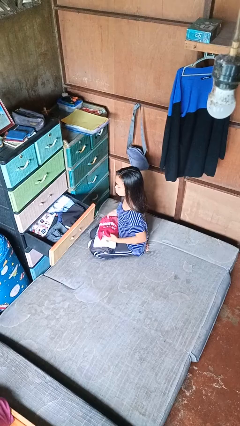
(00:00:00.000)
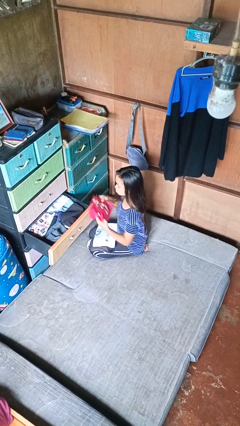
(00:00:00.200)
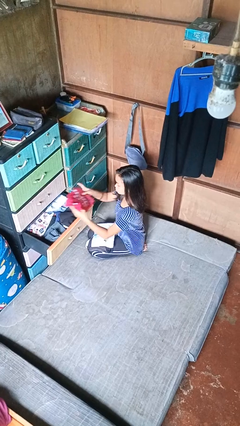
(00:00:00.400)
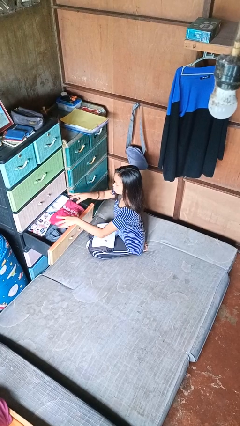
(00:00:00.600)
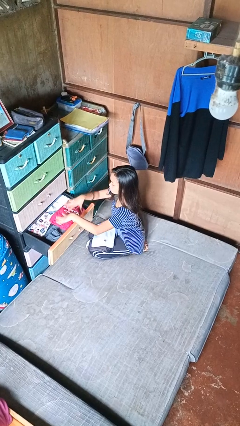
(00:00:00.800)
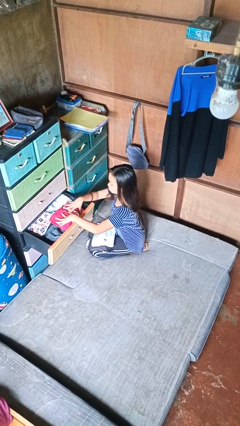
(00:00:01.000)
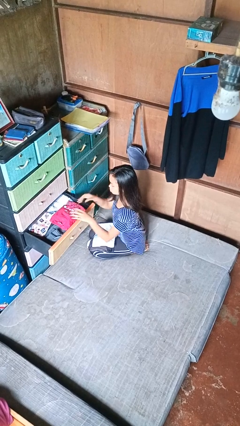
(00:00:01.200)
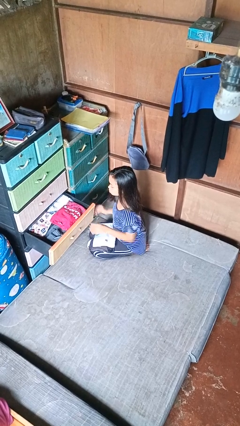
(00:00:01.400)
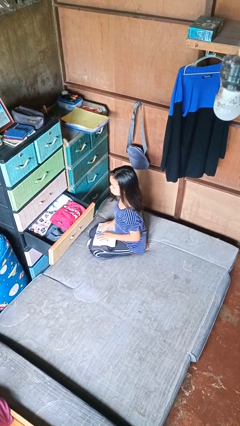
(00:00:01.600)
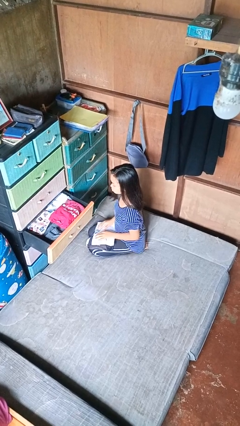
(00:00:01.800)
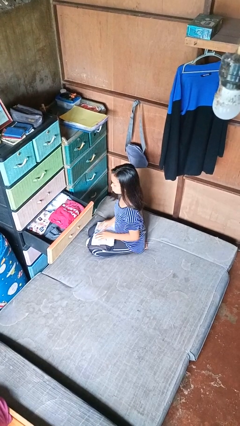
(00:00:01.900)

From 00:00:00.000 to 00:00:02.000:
person puts clothes into dresser

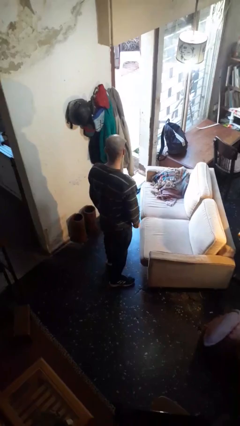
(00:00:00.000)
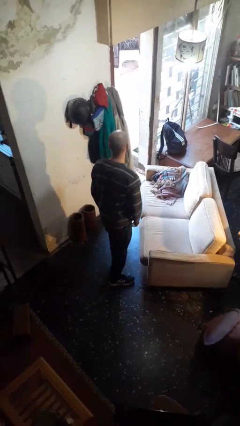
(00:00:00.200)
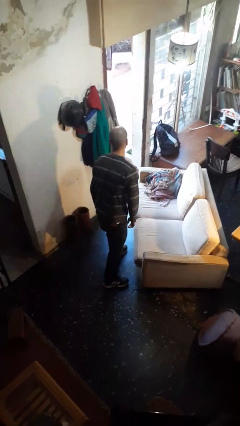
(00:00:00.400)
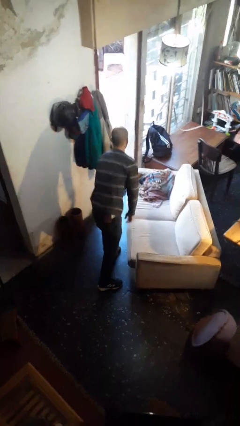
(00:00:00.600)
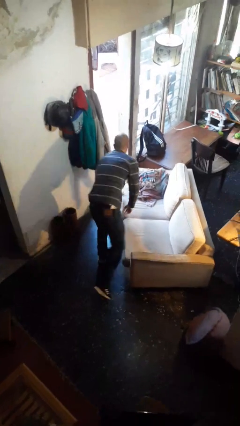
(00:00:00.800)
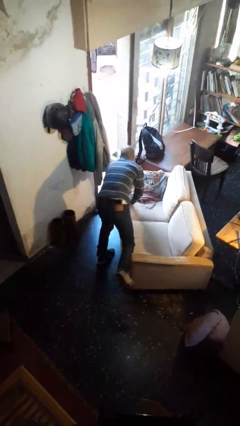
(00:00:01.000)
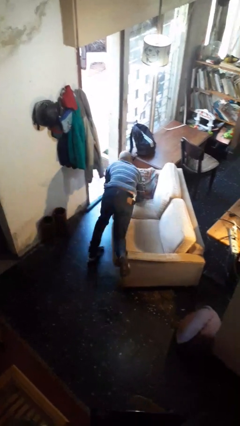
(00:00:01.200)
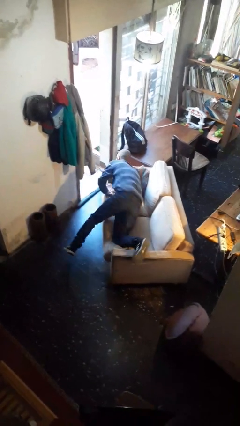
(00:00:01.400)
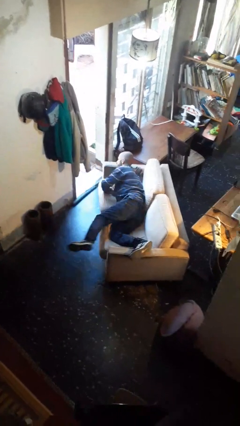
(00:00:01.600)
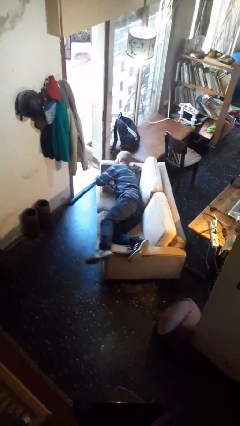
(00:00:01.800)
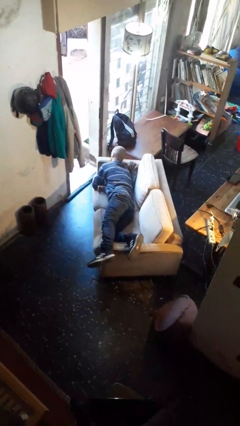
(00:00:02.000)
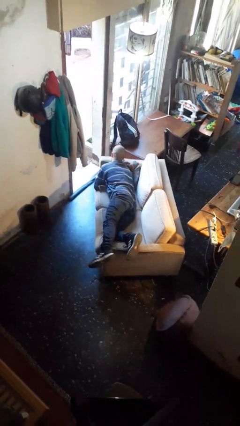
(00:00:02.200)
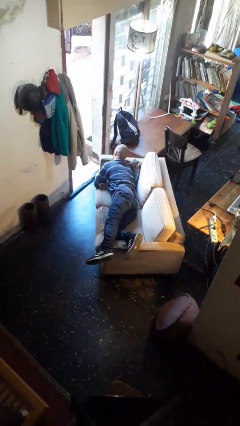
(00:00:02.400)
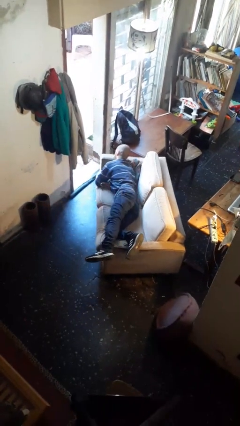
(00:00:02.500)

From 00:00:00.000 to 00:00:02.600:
person lies down on couch

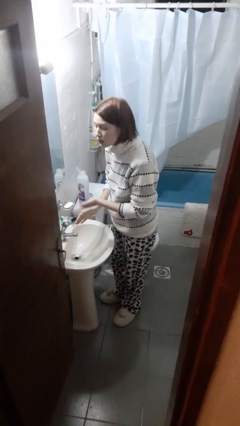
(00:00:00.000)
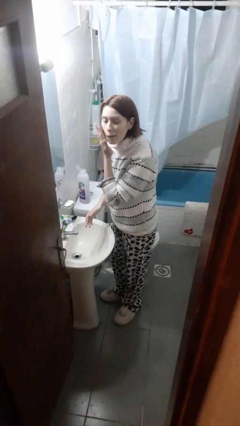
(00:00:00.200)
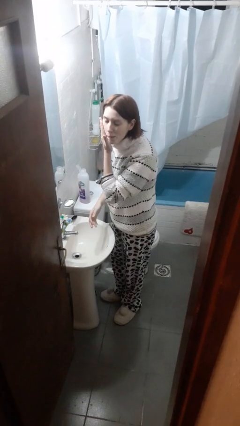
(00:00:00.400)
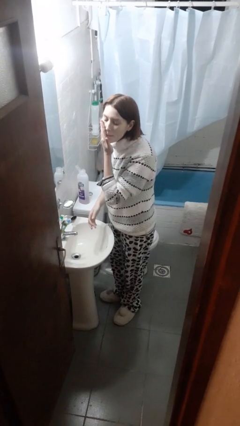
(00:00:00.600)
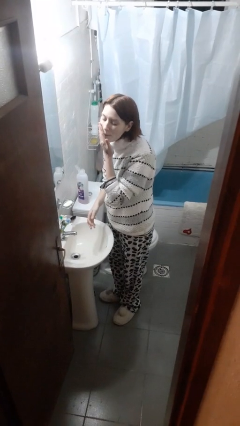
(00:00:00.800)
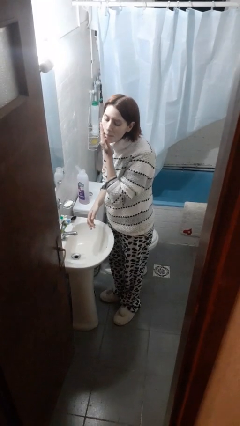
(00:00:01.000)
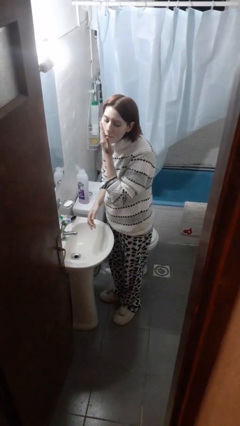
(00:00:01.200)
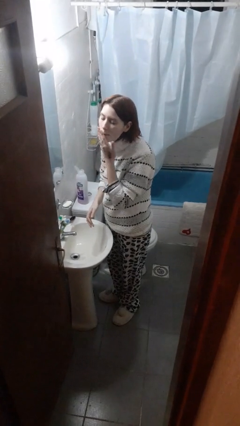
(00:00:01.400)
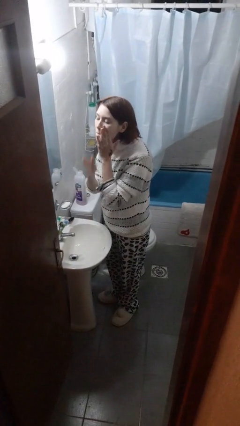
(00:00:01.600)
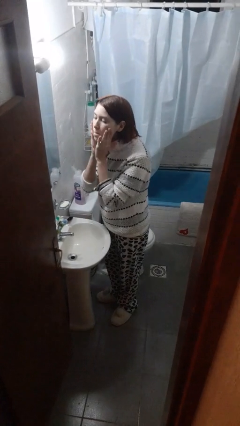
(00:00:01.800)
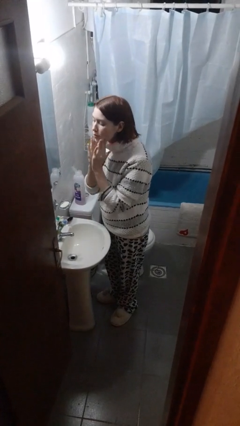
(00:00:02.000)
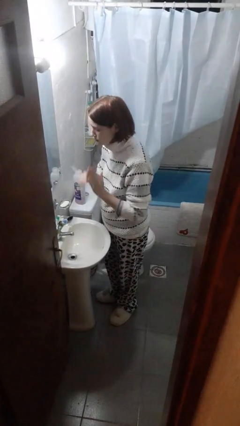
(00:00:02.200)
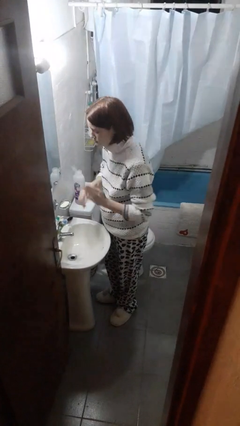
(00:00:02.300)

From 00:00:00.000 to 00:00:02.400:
person applies shaving cream

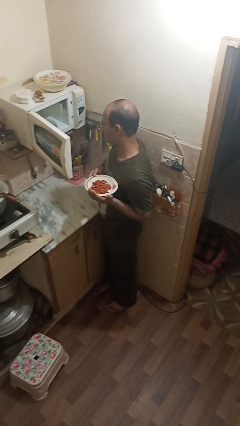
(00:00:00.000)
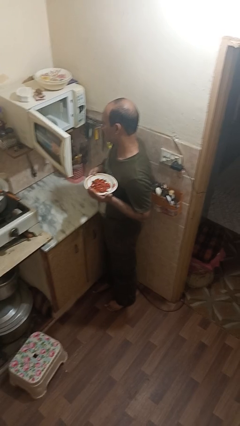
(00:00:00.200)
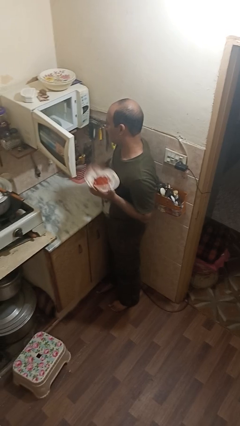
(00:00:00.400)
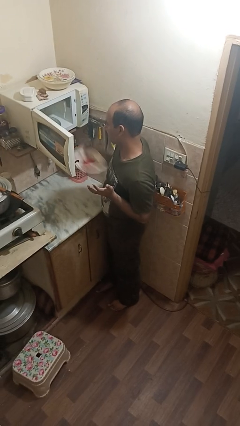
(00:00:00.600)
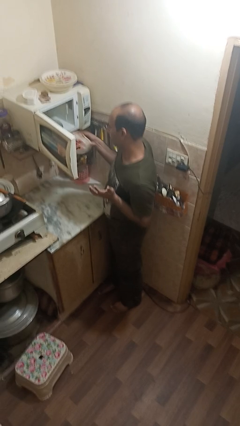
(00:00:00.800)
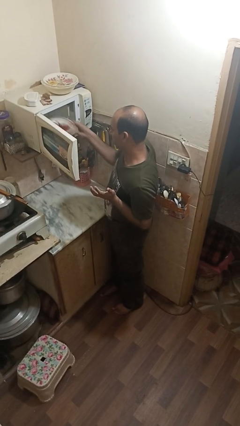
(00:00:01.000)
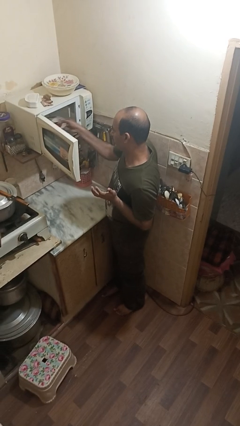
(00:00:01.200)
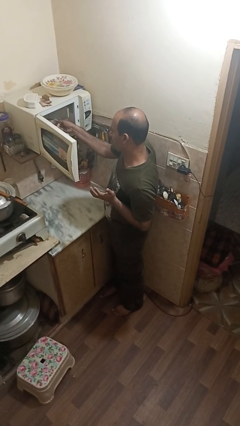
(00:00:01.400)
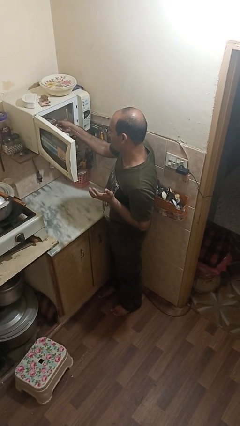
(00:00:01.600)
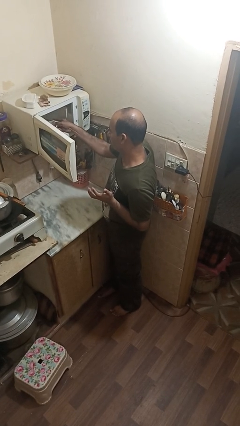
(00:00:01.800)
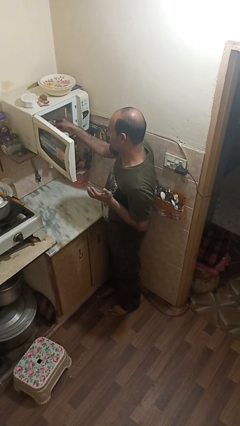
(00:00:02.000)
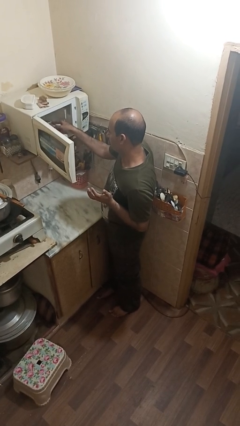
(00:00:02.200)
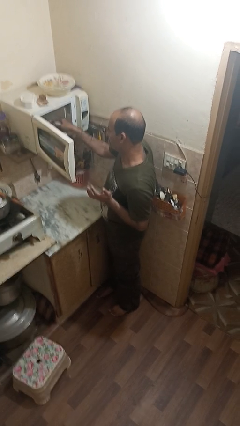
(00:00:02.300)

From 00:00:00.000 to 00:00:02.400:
person puts object into microwave

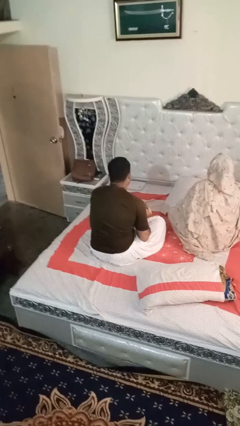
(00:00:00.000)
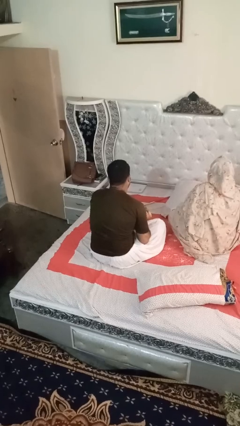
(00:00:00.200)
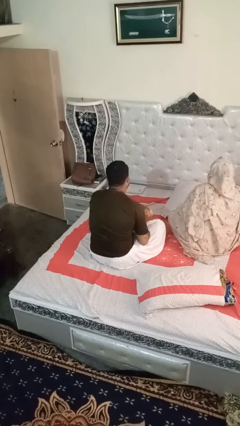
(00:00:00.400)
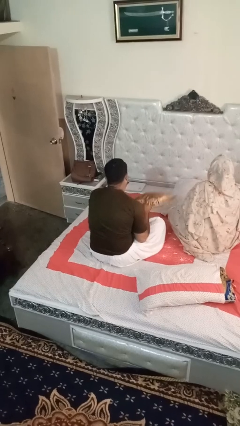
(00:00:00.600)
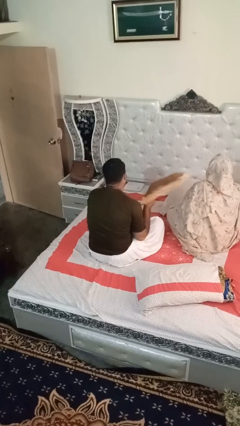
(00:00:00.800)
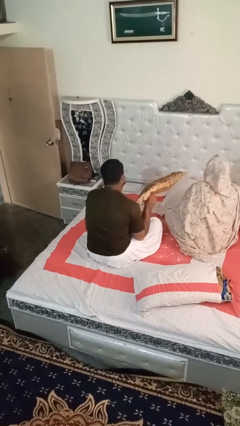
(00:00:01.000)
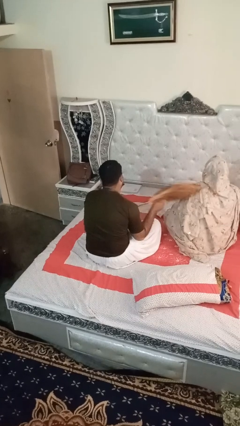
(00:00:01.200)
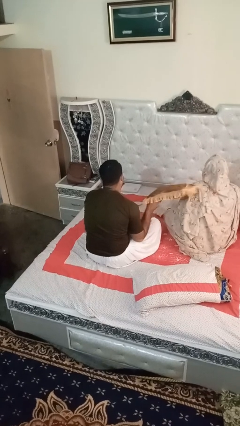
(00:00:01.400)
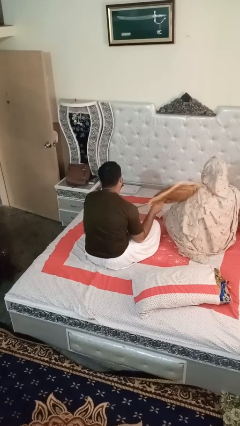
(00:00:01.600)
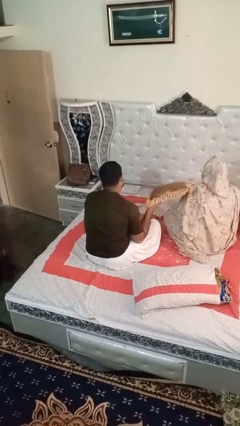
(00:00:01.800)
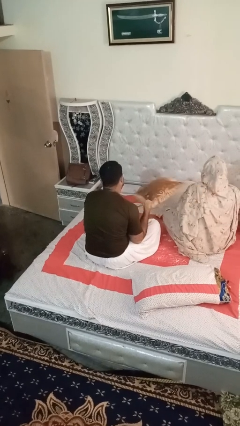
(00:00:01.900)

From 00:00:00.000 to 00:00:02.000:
person hits person with pillow

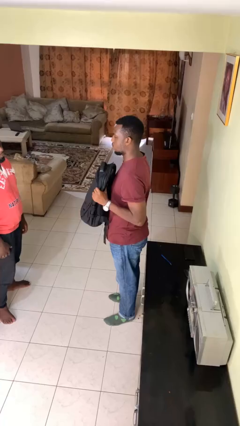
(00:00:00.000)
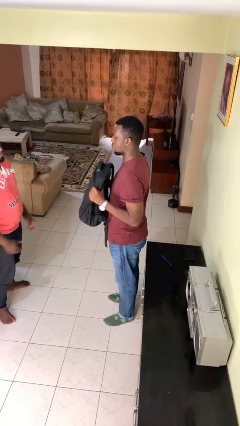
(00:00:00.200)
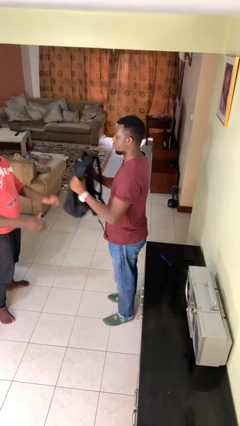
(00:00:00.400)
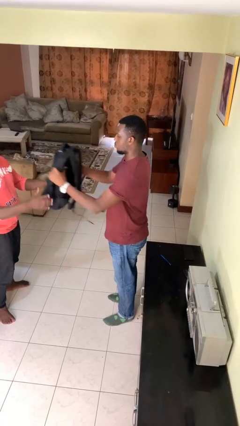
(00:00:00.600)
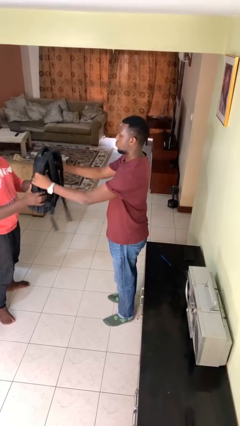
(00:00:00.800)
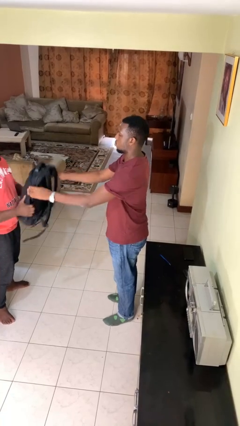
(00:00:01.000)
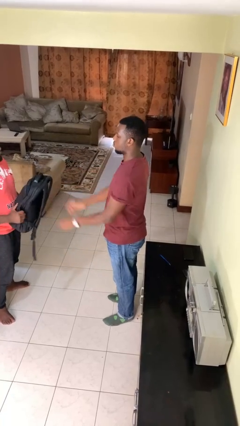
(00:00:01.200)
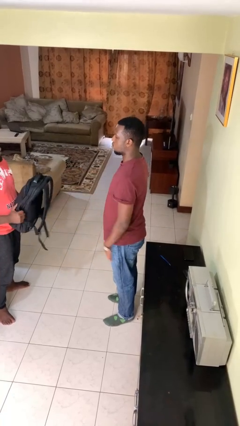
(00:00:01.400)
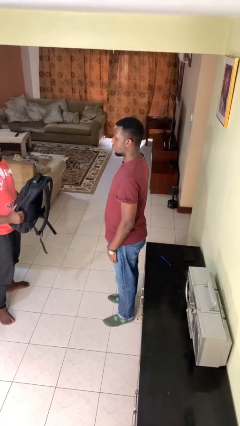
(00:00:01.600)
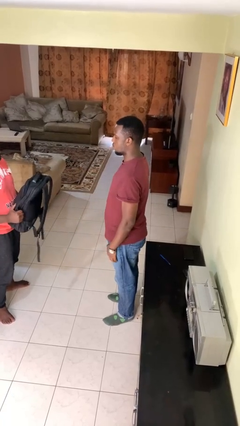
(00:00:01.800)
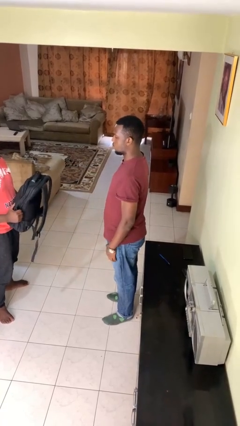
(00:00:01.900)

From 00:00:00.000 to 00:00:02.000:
person transfers object to person

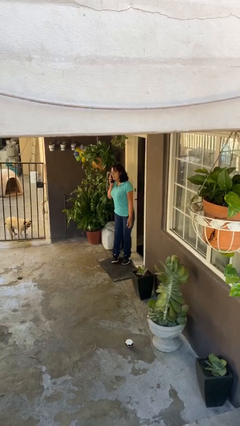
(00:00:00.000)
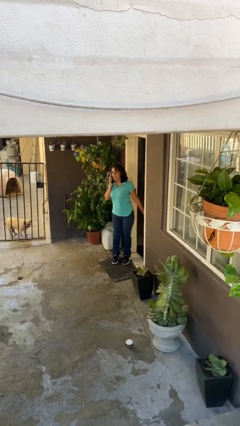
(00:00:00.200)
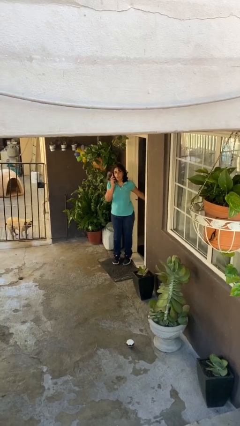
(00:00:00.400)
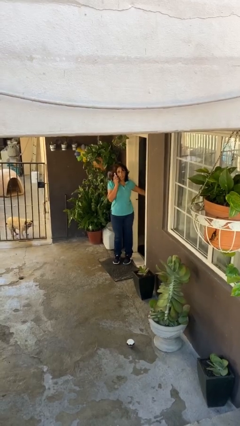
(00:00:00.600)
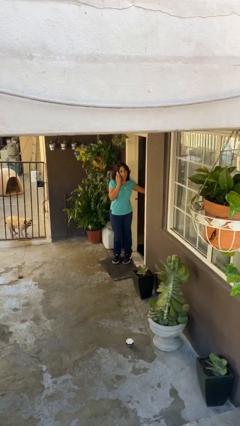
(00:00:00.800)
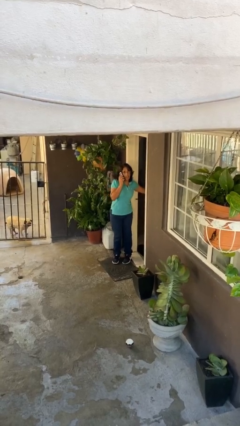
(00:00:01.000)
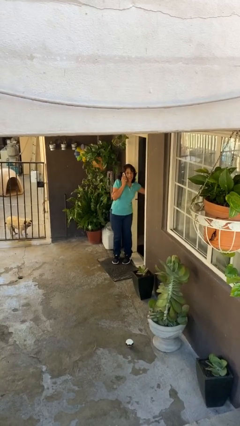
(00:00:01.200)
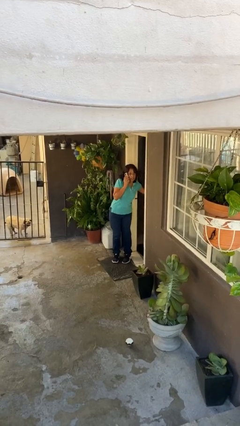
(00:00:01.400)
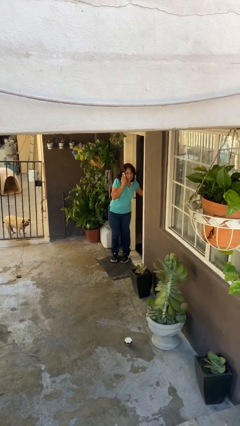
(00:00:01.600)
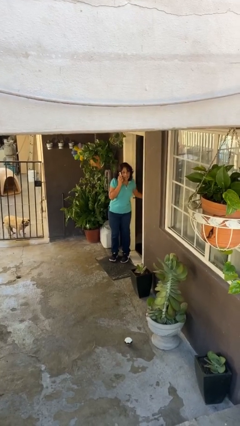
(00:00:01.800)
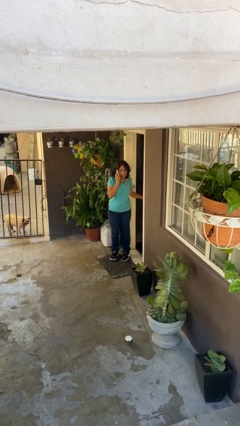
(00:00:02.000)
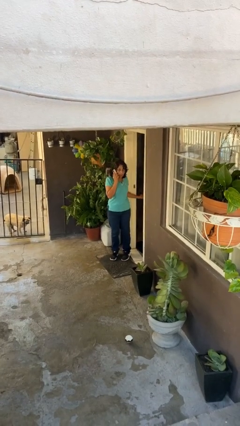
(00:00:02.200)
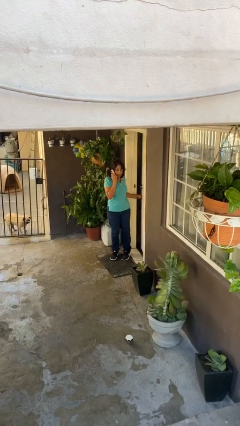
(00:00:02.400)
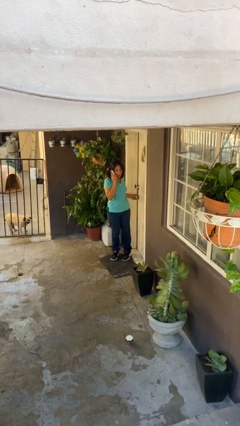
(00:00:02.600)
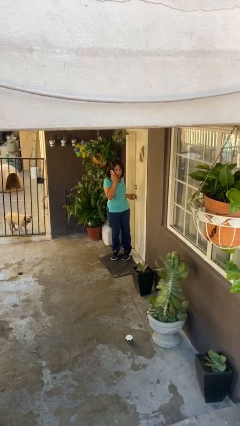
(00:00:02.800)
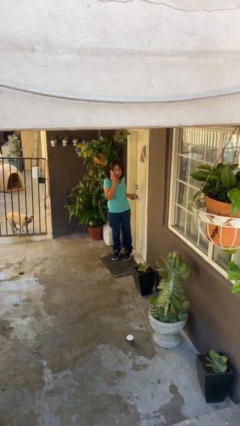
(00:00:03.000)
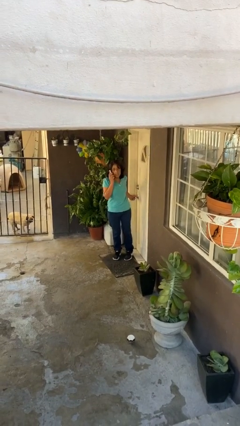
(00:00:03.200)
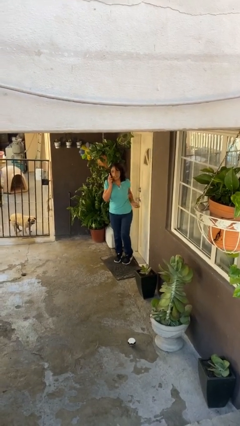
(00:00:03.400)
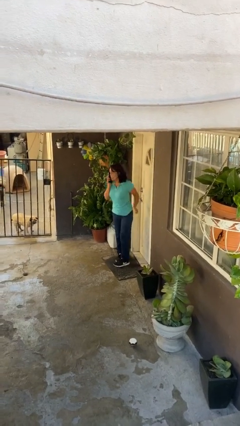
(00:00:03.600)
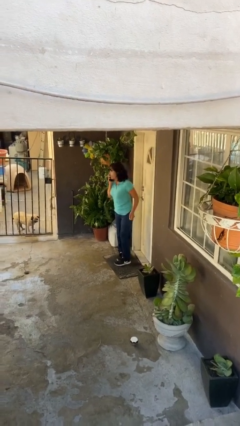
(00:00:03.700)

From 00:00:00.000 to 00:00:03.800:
person closes facility door
